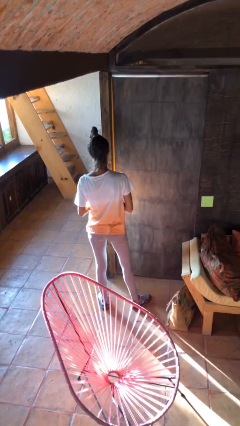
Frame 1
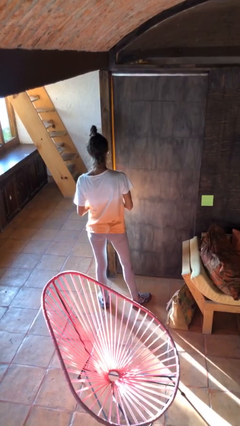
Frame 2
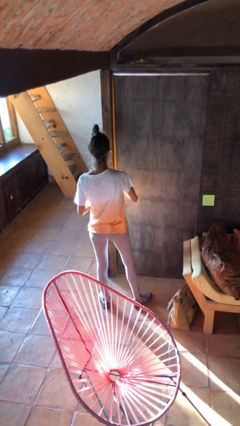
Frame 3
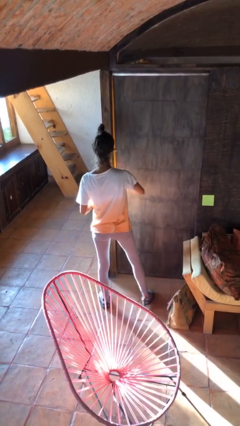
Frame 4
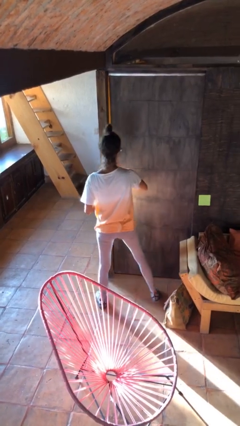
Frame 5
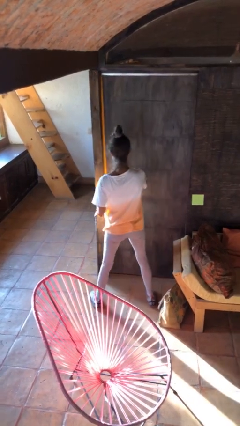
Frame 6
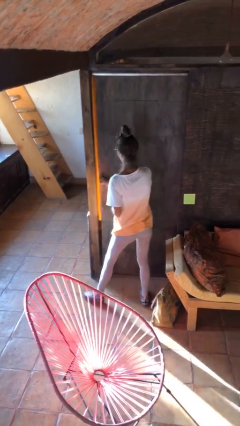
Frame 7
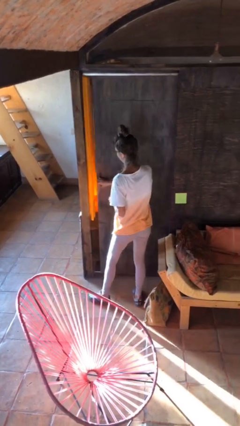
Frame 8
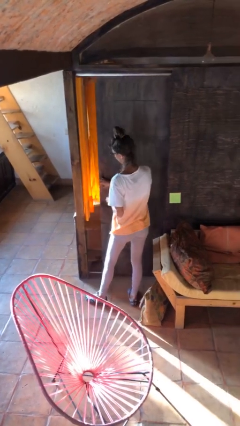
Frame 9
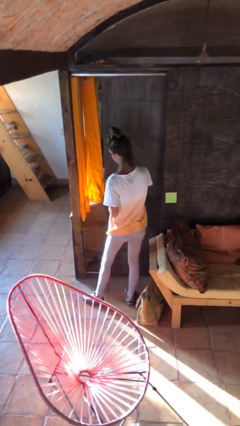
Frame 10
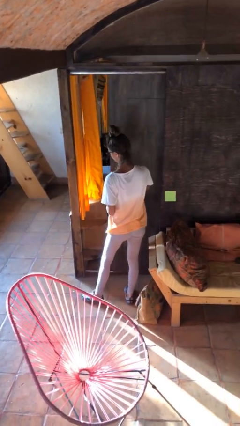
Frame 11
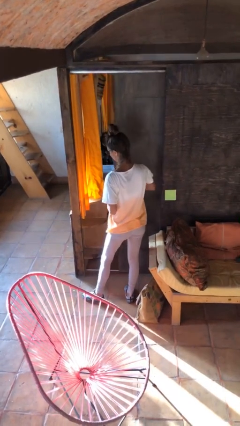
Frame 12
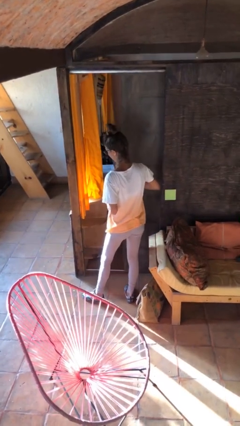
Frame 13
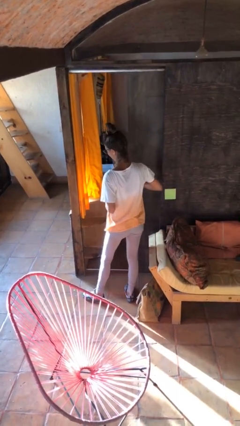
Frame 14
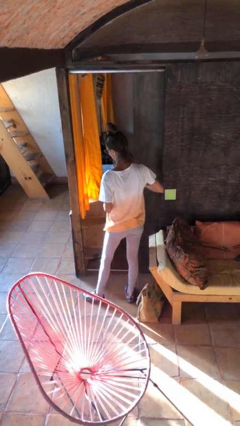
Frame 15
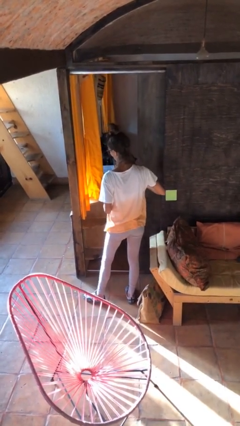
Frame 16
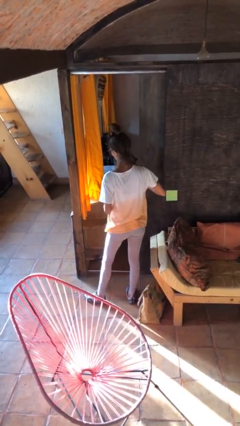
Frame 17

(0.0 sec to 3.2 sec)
person opens sliding door

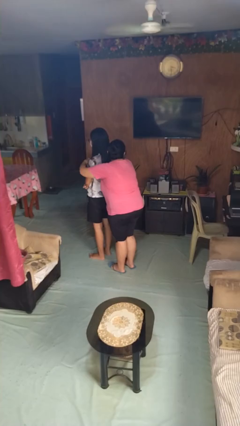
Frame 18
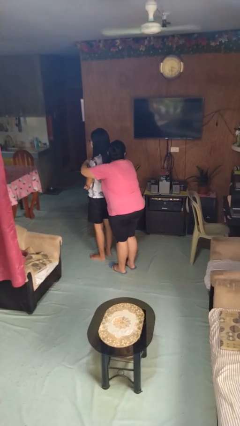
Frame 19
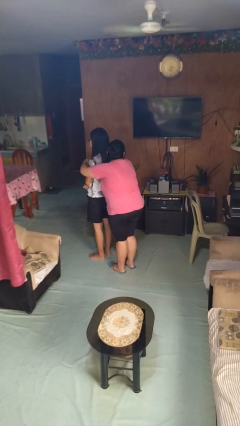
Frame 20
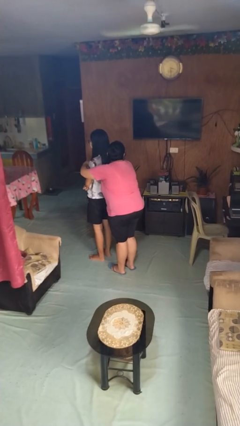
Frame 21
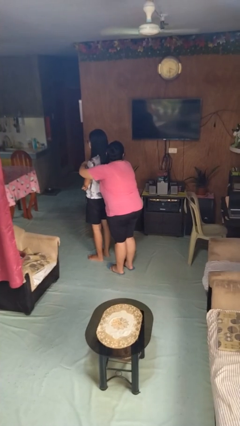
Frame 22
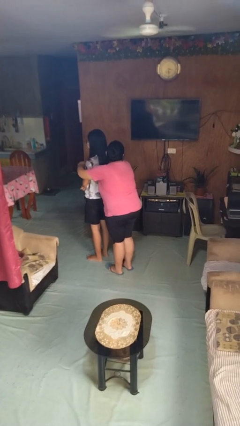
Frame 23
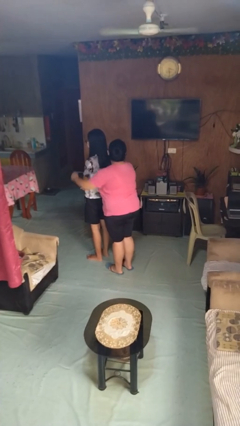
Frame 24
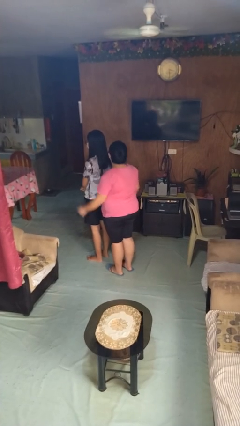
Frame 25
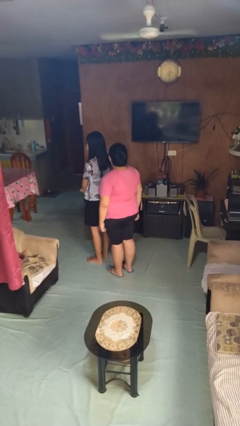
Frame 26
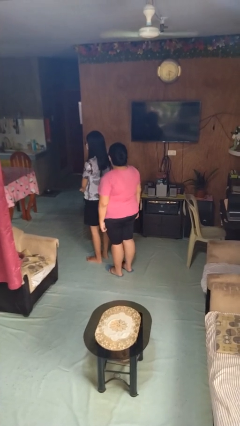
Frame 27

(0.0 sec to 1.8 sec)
person hugs person from behind

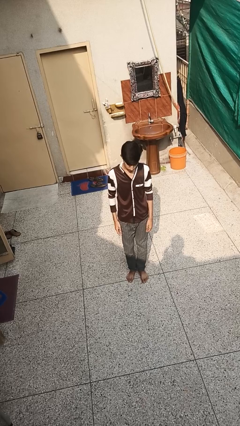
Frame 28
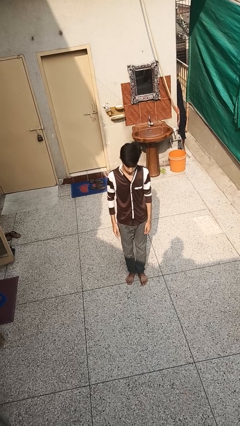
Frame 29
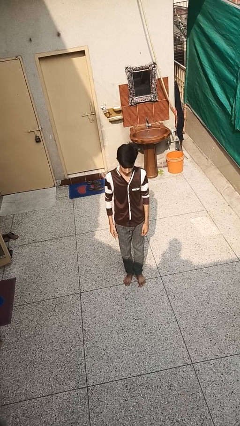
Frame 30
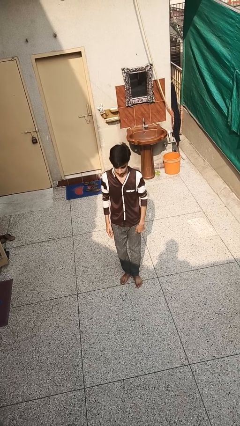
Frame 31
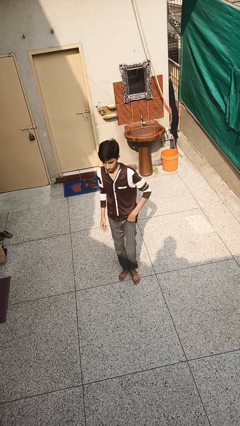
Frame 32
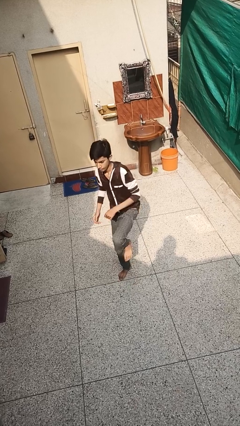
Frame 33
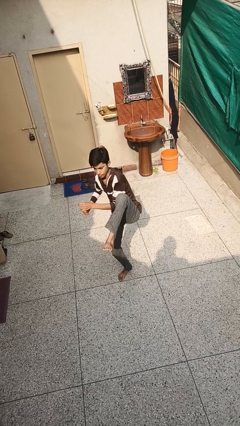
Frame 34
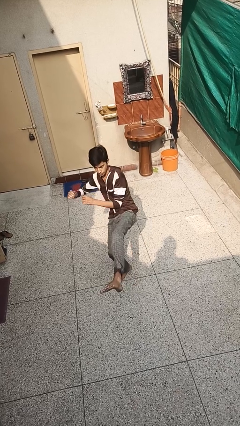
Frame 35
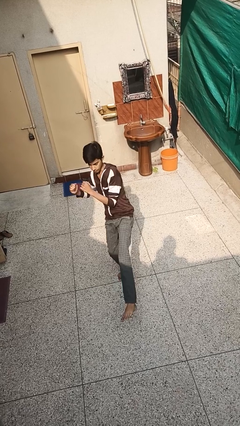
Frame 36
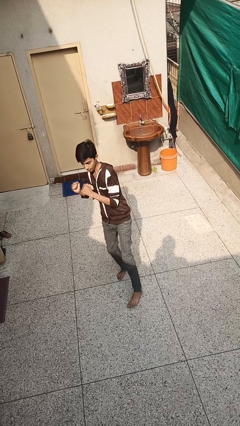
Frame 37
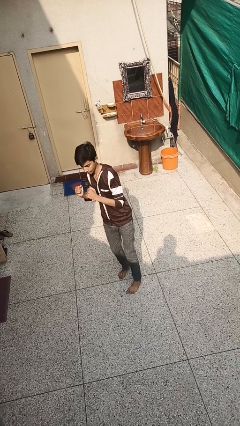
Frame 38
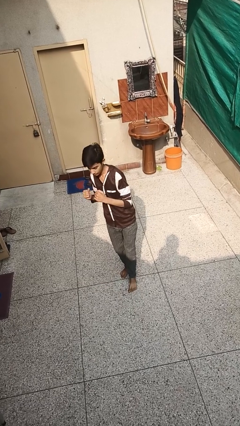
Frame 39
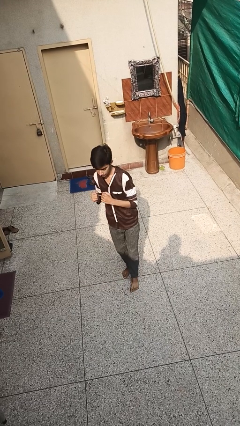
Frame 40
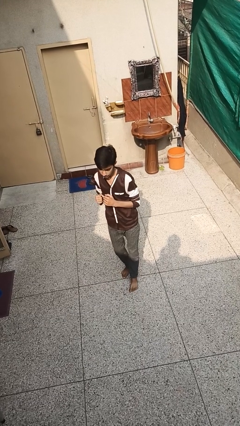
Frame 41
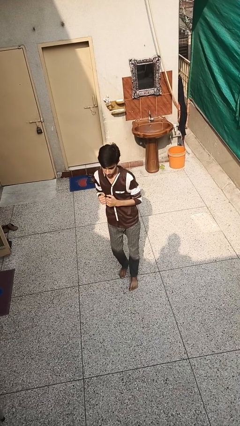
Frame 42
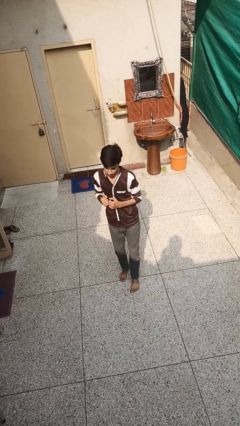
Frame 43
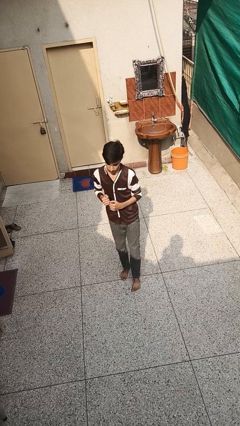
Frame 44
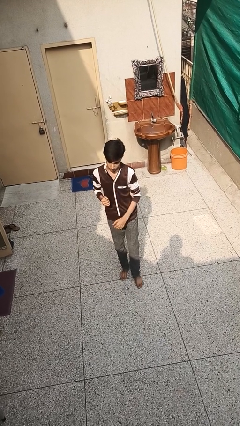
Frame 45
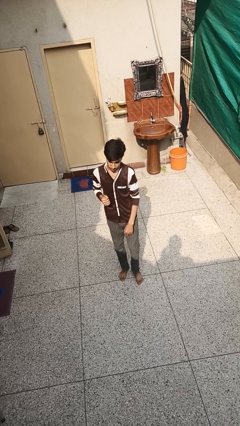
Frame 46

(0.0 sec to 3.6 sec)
person karate kicks

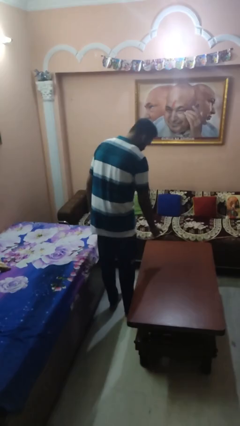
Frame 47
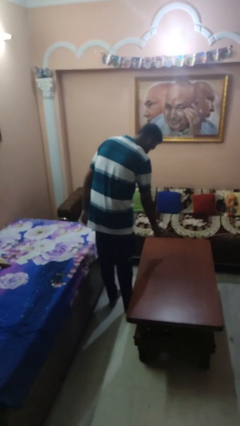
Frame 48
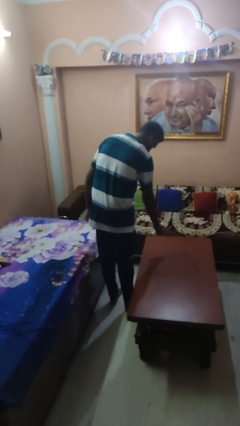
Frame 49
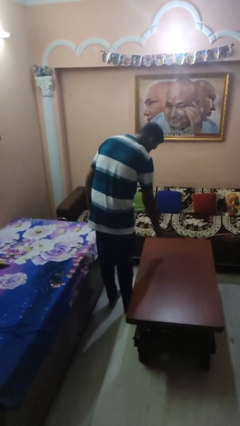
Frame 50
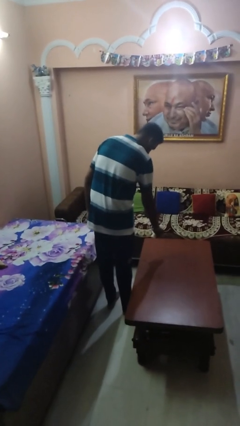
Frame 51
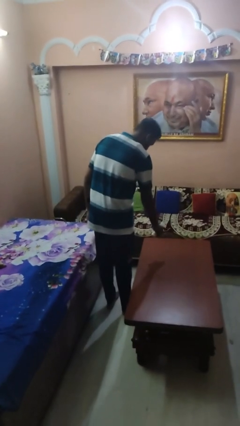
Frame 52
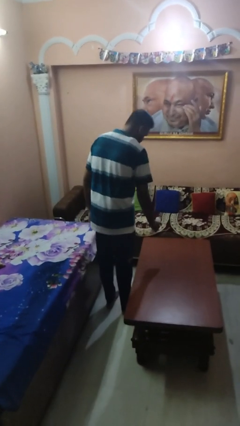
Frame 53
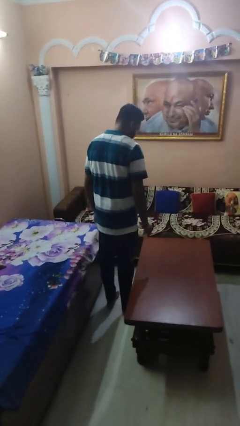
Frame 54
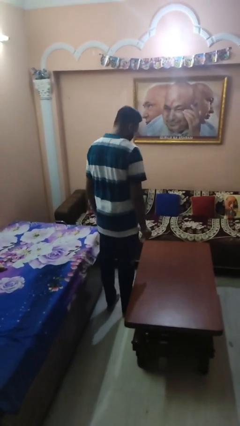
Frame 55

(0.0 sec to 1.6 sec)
person sprays from bottle

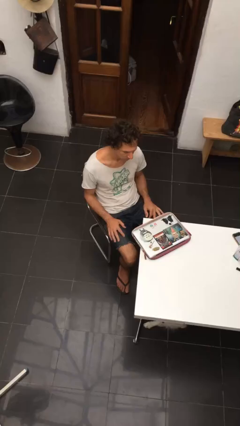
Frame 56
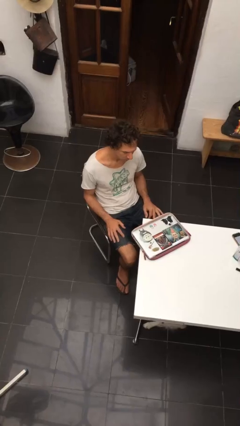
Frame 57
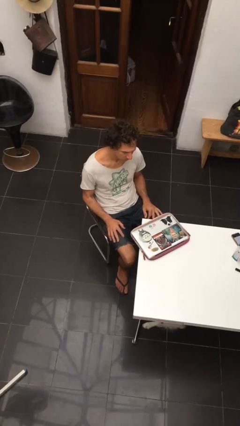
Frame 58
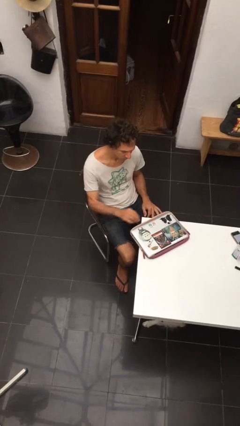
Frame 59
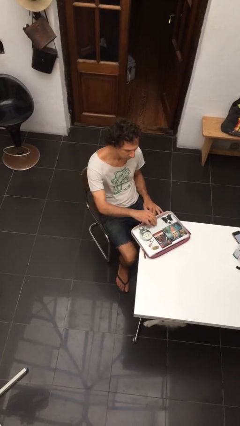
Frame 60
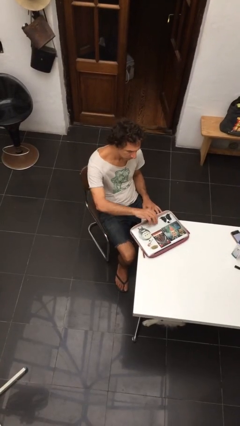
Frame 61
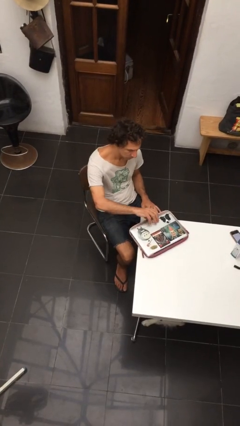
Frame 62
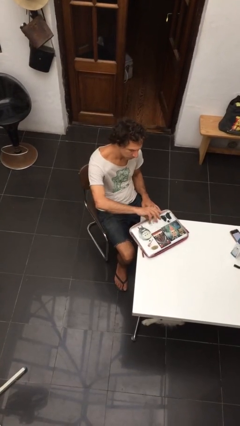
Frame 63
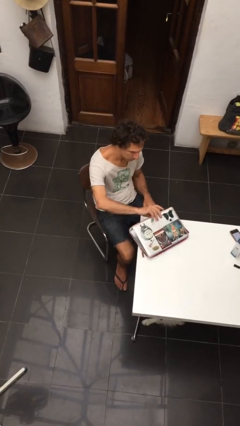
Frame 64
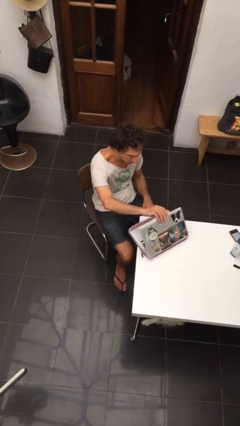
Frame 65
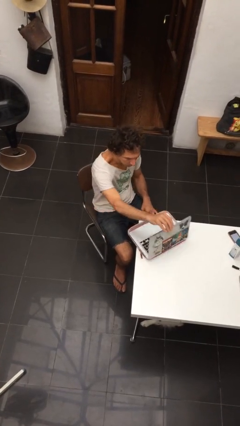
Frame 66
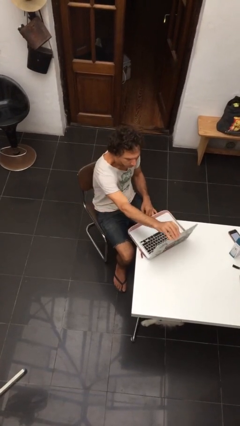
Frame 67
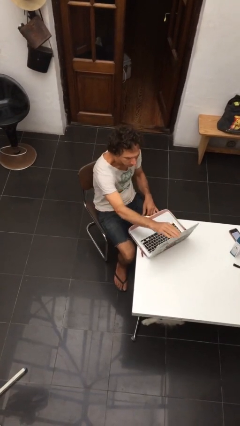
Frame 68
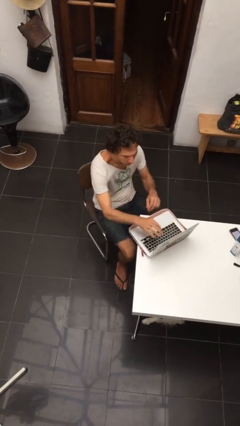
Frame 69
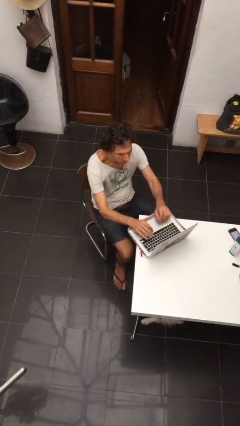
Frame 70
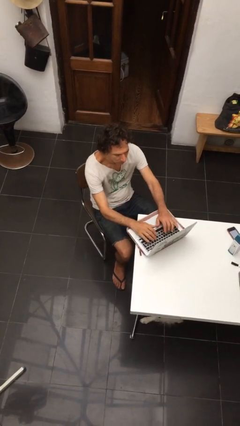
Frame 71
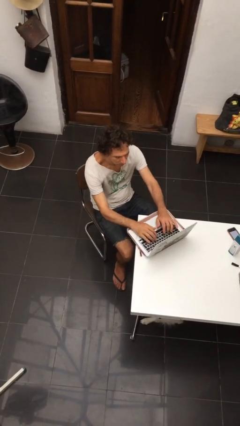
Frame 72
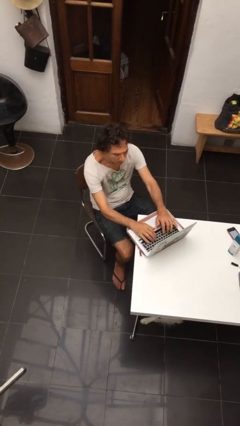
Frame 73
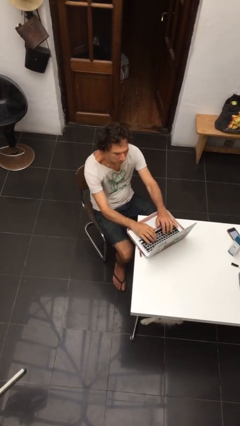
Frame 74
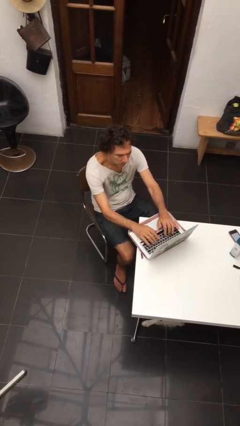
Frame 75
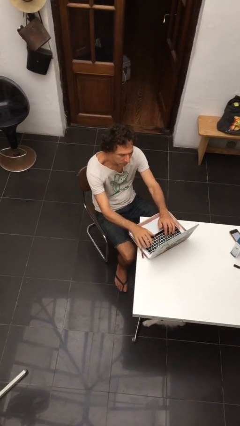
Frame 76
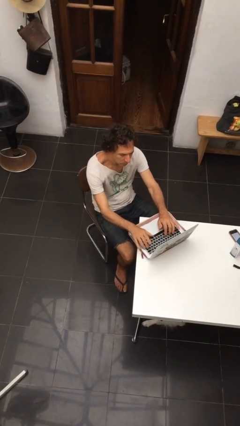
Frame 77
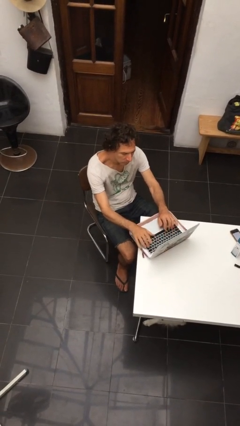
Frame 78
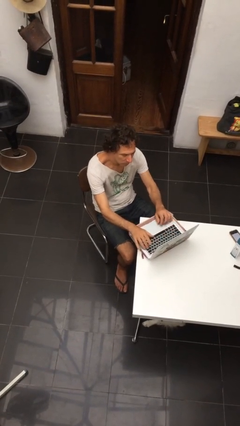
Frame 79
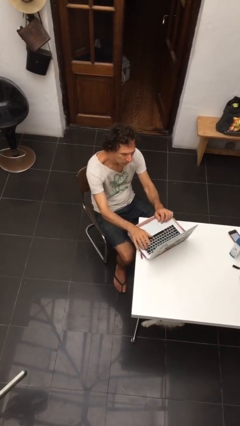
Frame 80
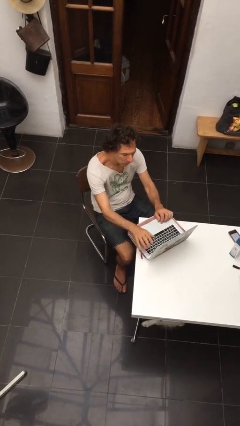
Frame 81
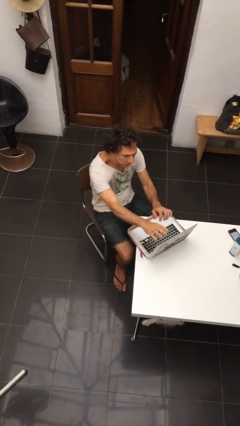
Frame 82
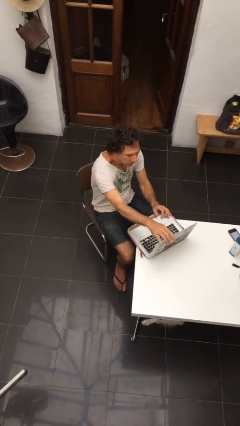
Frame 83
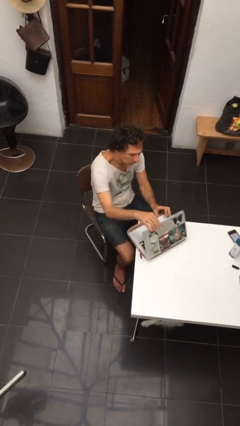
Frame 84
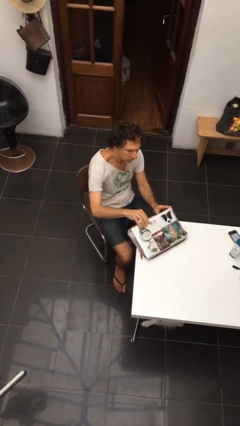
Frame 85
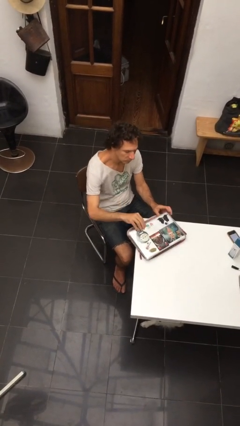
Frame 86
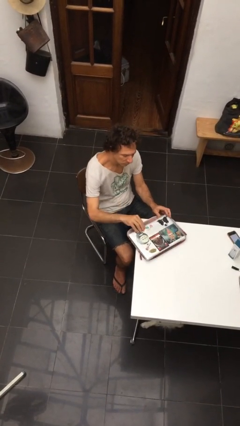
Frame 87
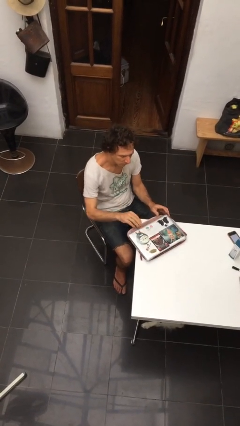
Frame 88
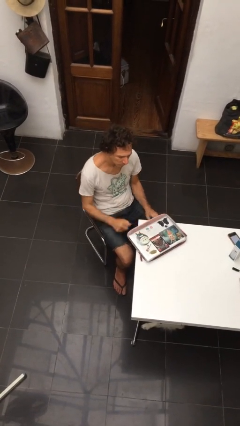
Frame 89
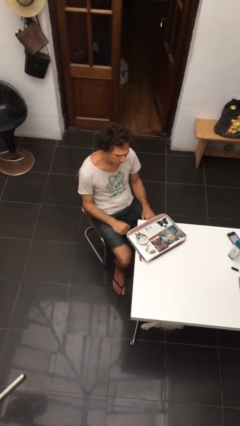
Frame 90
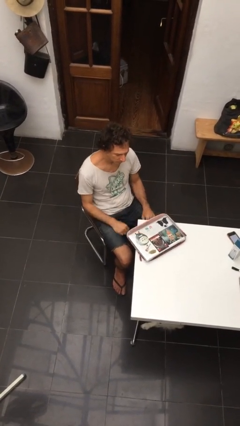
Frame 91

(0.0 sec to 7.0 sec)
person interacts with laptop

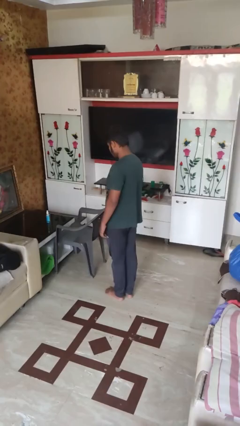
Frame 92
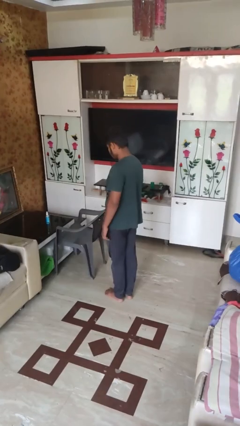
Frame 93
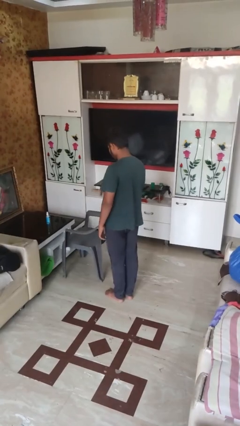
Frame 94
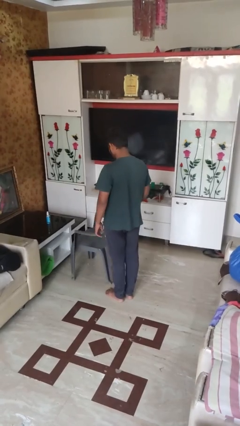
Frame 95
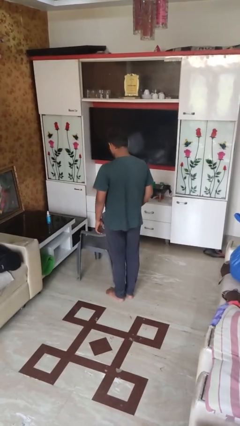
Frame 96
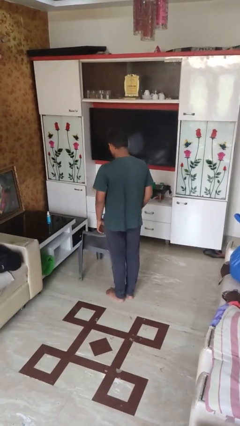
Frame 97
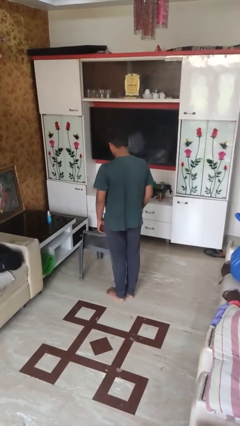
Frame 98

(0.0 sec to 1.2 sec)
person pulls out chair
